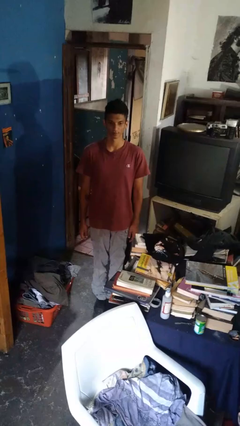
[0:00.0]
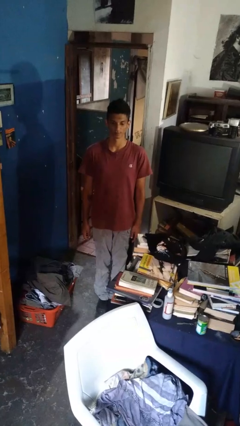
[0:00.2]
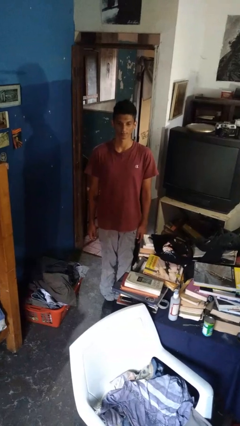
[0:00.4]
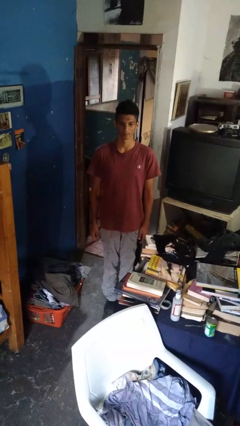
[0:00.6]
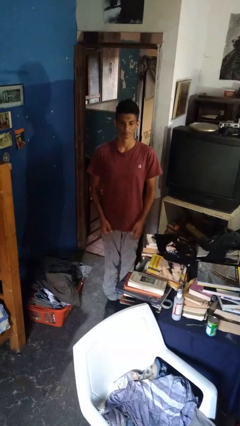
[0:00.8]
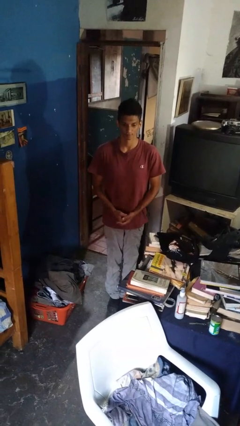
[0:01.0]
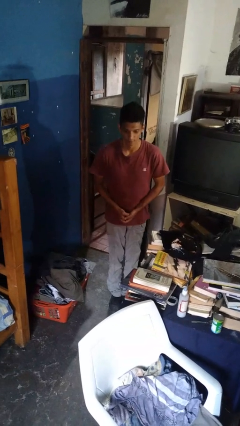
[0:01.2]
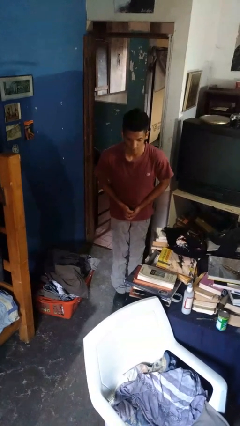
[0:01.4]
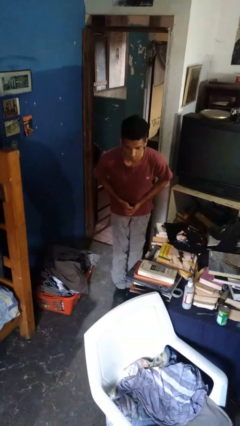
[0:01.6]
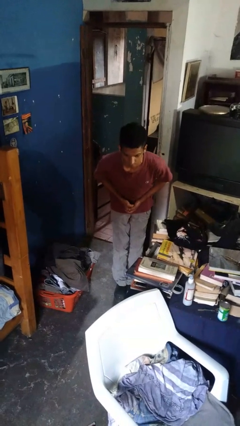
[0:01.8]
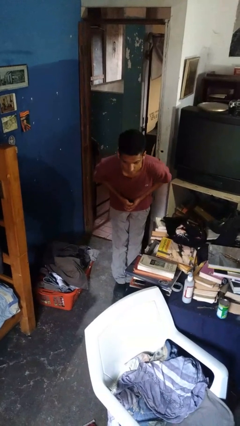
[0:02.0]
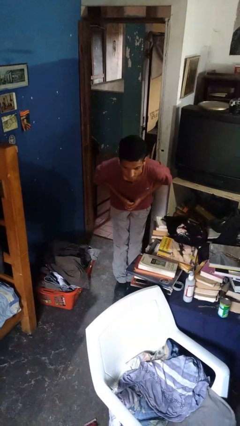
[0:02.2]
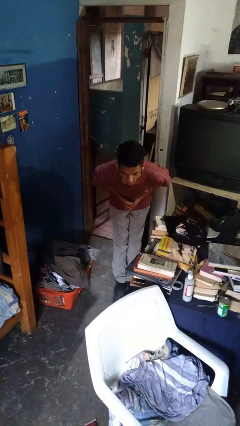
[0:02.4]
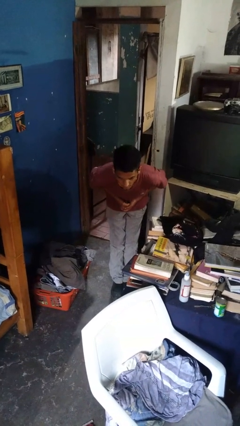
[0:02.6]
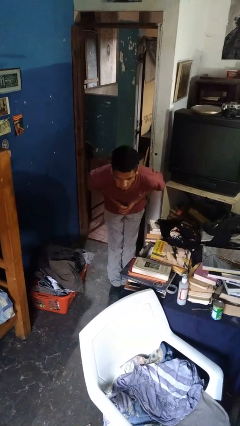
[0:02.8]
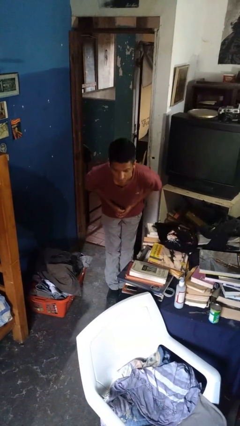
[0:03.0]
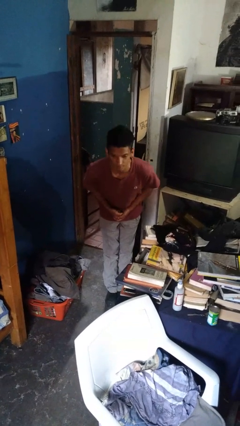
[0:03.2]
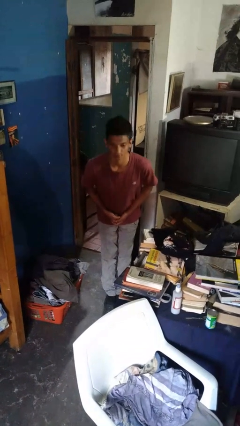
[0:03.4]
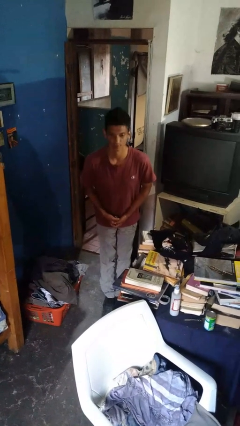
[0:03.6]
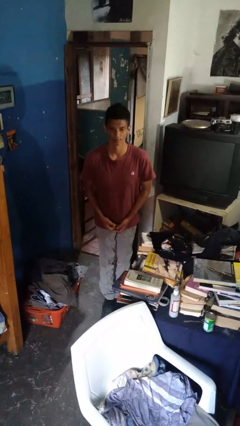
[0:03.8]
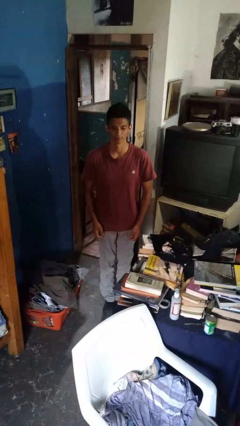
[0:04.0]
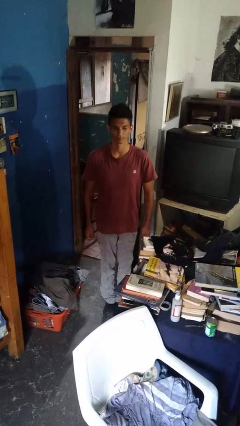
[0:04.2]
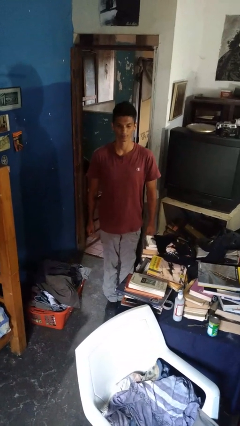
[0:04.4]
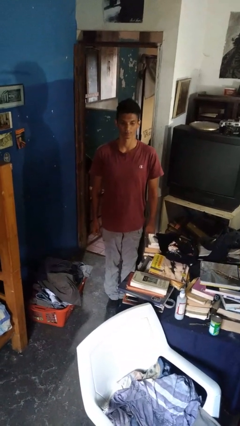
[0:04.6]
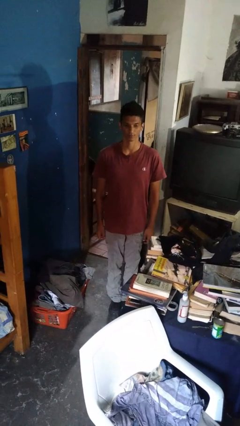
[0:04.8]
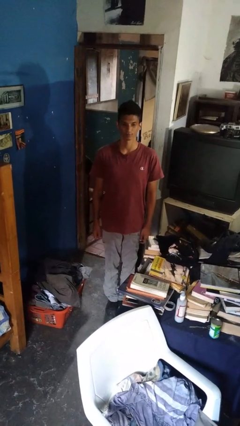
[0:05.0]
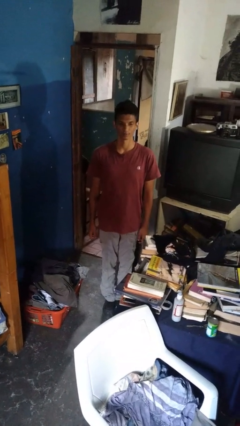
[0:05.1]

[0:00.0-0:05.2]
person bows

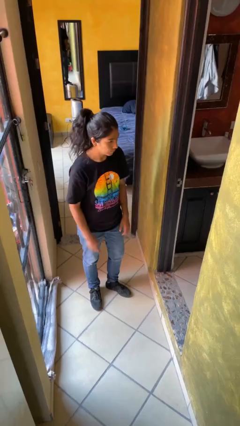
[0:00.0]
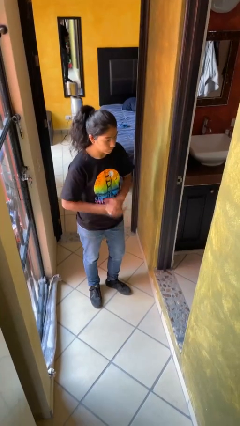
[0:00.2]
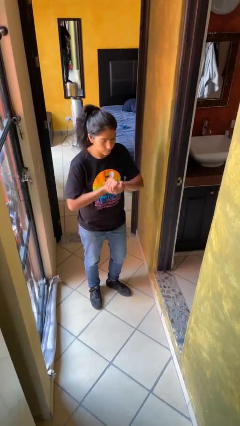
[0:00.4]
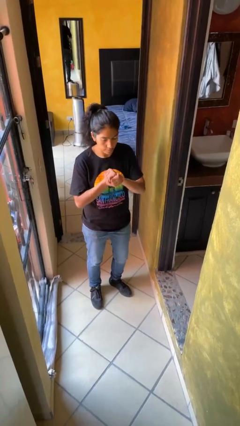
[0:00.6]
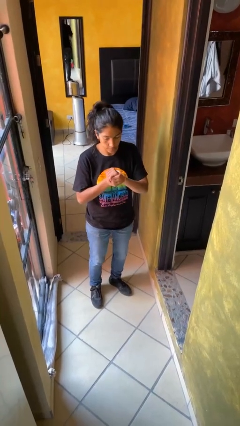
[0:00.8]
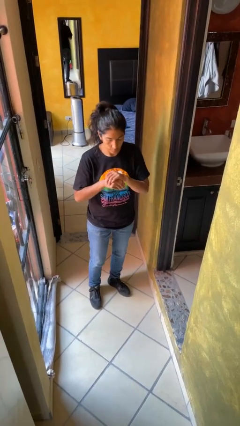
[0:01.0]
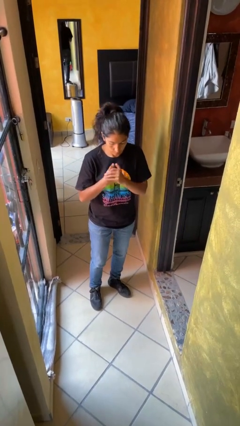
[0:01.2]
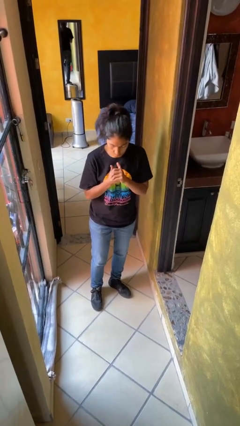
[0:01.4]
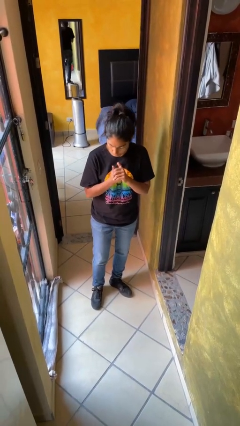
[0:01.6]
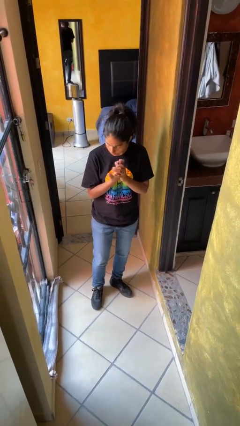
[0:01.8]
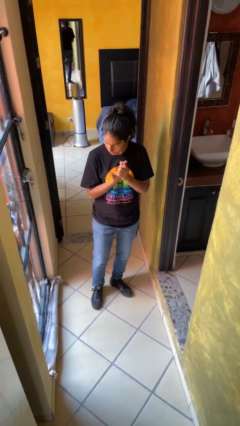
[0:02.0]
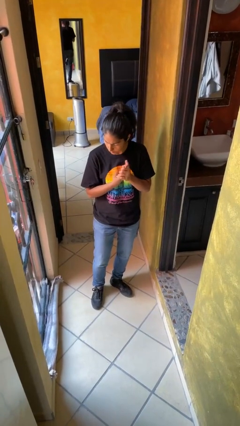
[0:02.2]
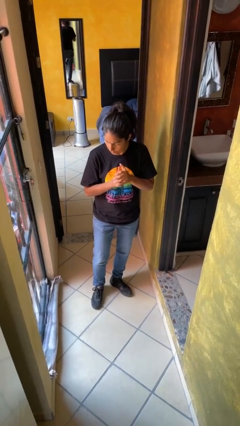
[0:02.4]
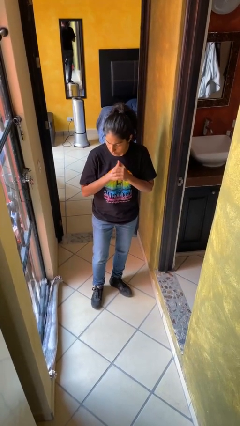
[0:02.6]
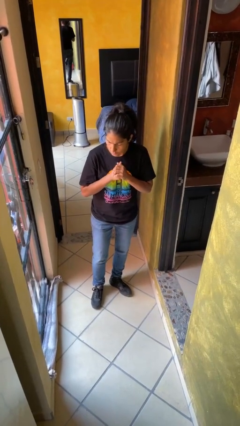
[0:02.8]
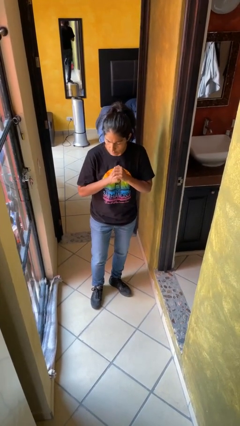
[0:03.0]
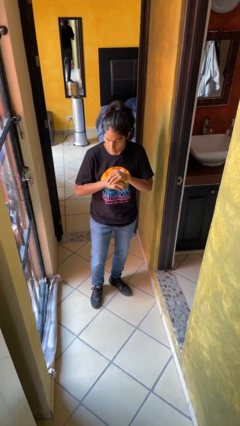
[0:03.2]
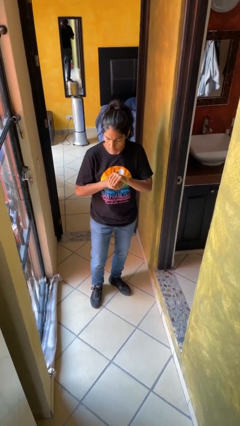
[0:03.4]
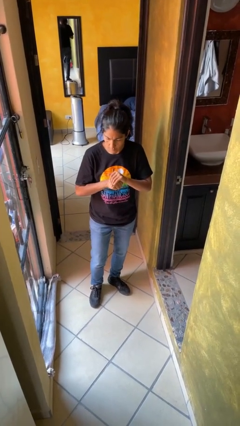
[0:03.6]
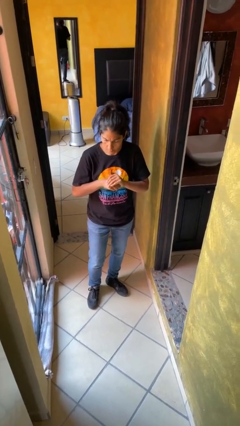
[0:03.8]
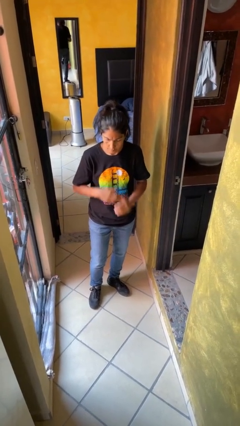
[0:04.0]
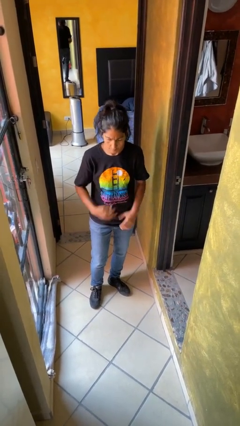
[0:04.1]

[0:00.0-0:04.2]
person cracks knuckles

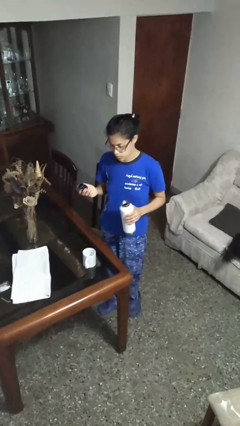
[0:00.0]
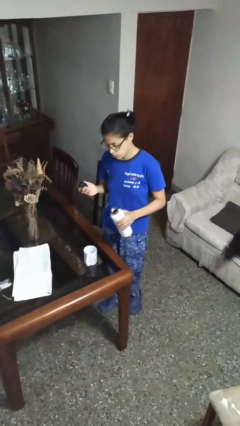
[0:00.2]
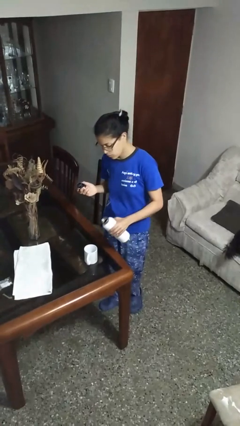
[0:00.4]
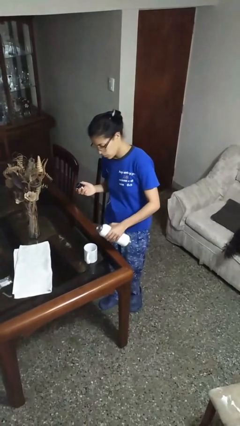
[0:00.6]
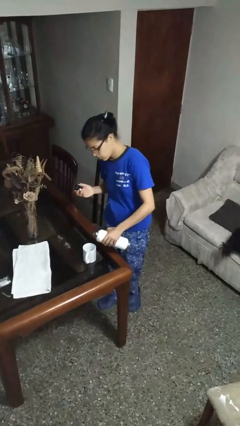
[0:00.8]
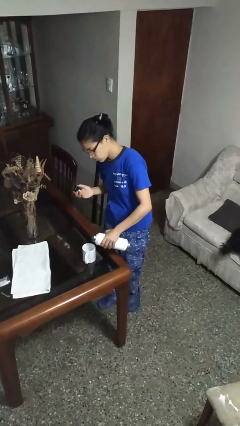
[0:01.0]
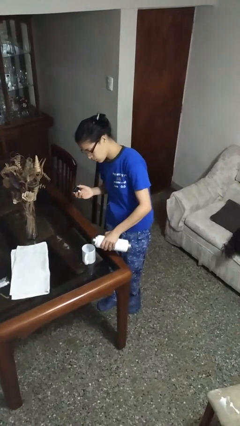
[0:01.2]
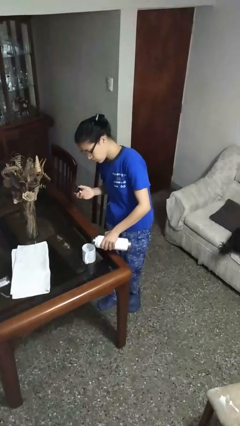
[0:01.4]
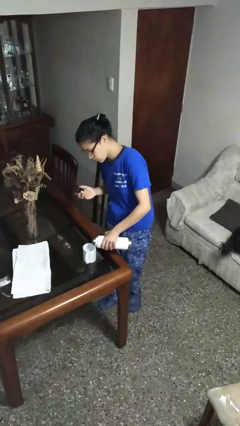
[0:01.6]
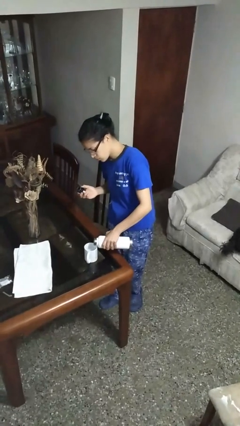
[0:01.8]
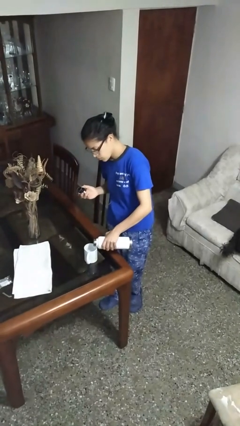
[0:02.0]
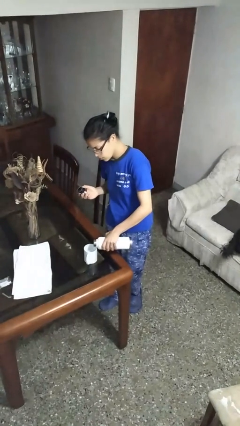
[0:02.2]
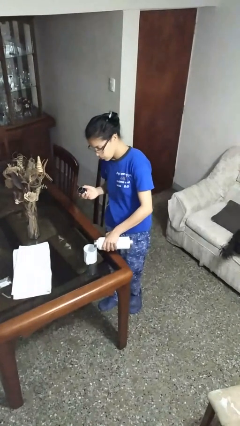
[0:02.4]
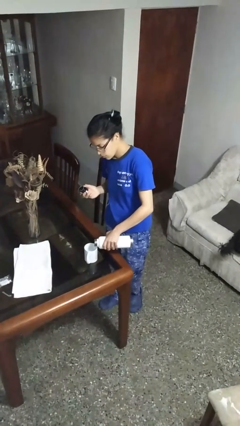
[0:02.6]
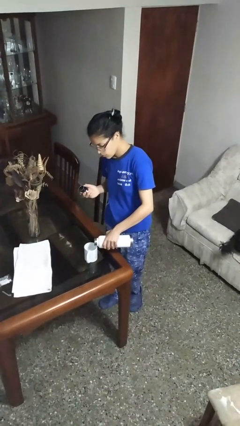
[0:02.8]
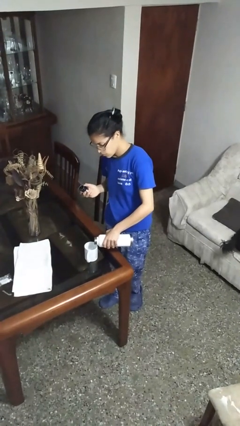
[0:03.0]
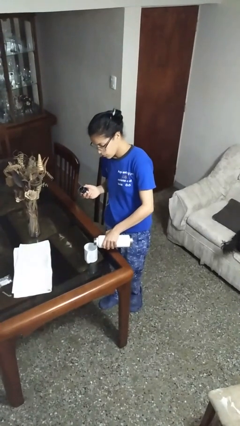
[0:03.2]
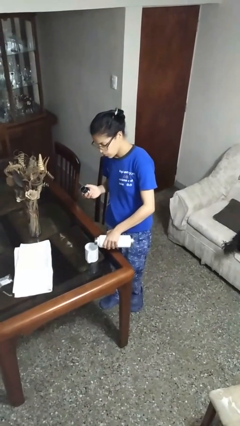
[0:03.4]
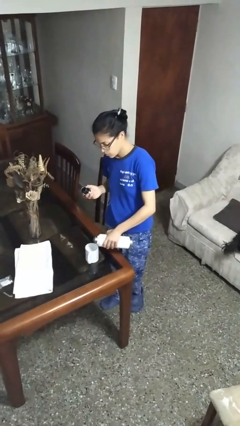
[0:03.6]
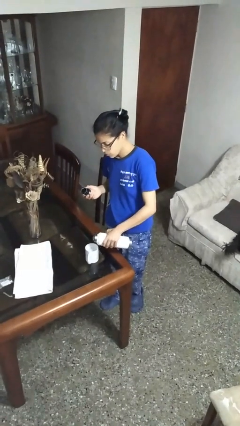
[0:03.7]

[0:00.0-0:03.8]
person pours liquid into cup

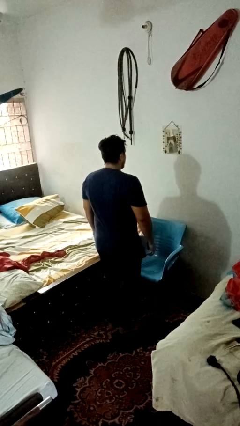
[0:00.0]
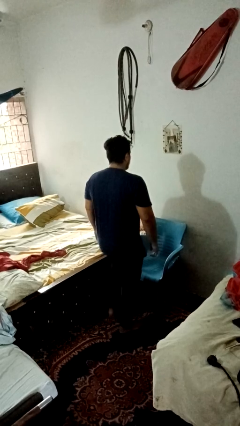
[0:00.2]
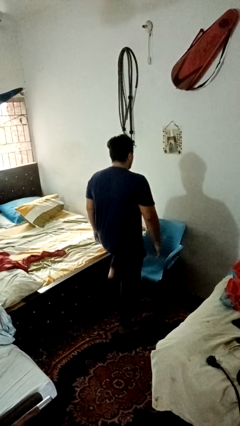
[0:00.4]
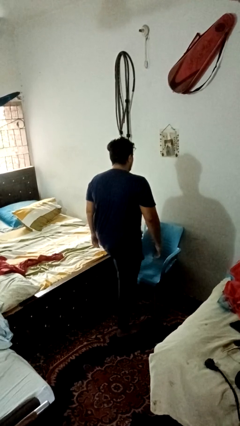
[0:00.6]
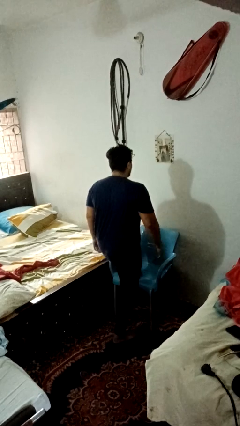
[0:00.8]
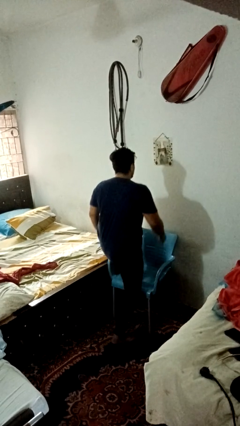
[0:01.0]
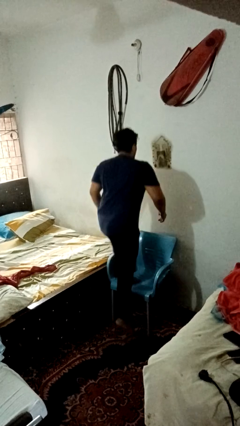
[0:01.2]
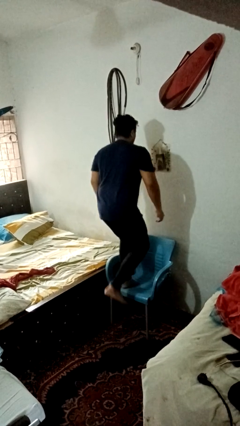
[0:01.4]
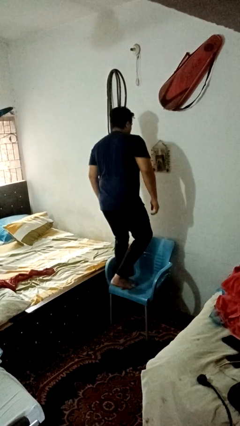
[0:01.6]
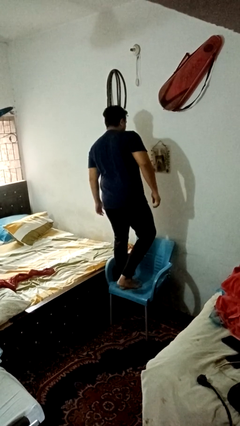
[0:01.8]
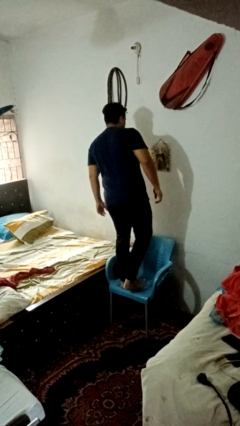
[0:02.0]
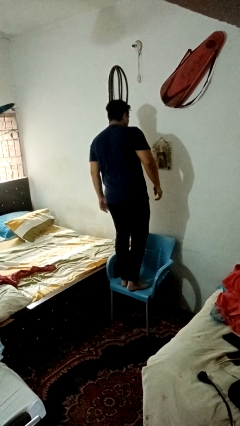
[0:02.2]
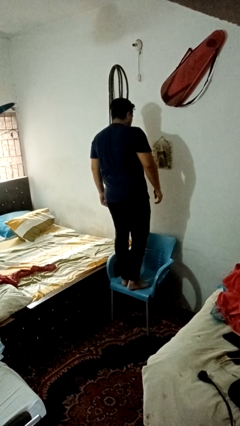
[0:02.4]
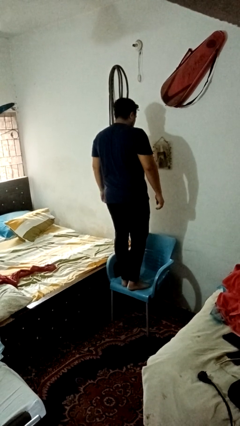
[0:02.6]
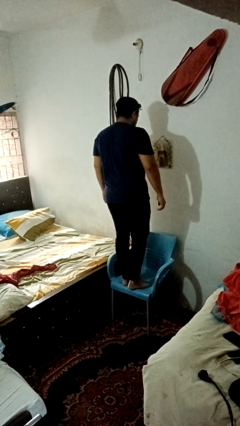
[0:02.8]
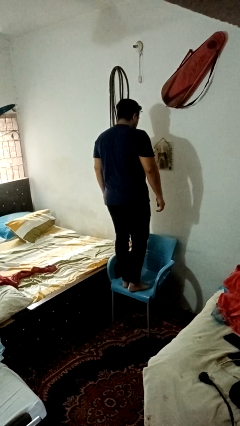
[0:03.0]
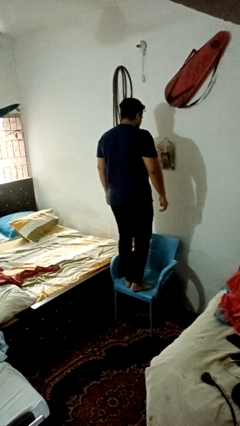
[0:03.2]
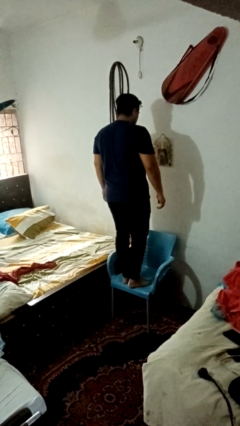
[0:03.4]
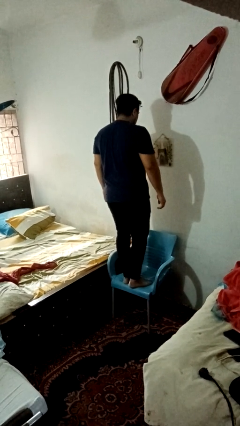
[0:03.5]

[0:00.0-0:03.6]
person climbs on chair

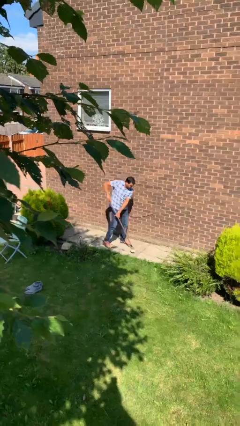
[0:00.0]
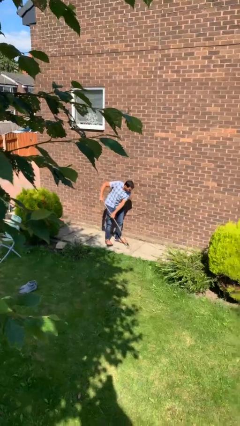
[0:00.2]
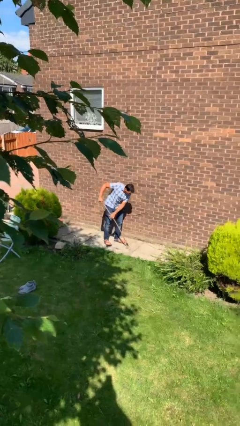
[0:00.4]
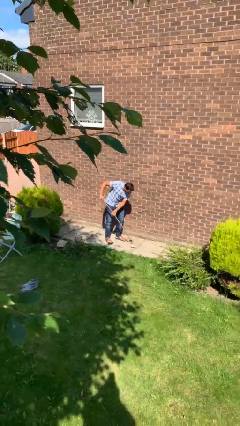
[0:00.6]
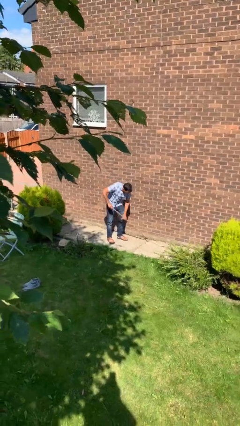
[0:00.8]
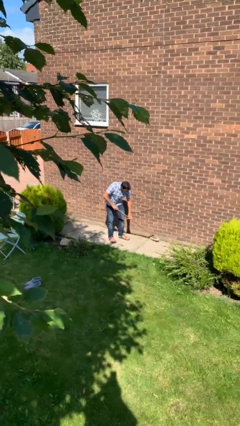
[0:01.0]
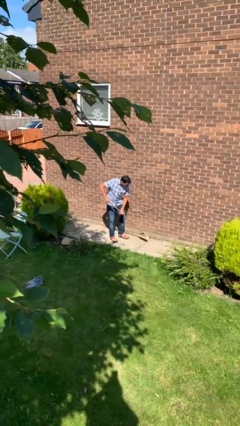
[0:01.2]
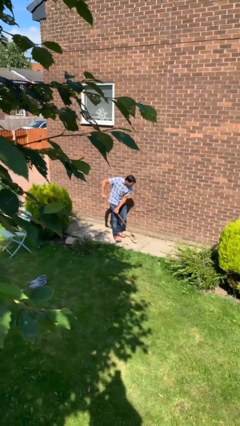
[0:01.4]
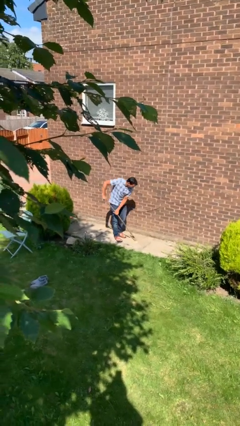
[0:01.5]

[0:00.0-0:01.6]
person sweeps floor
